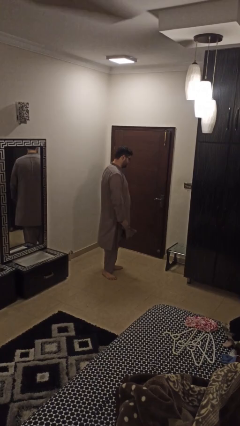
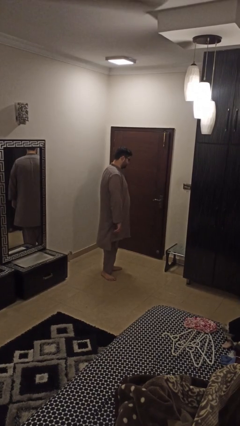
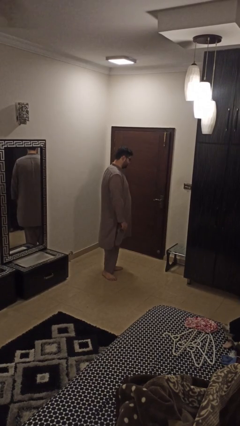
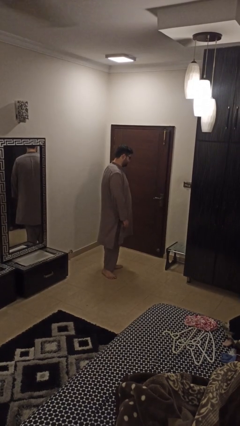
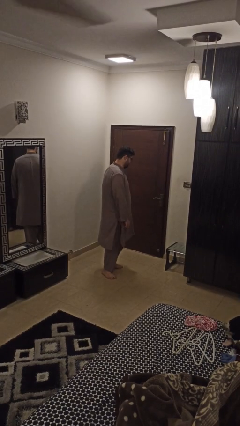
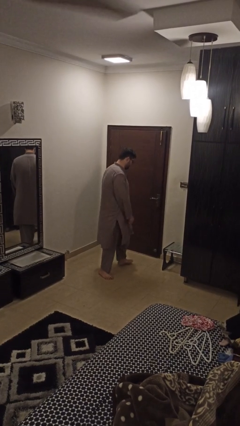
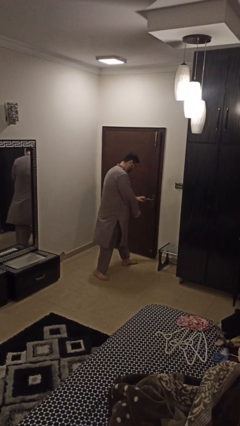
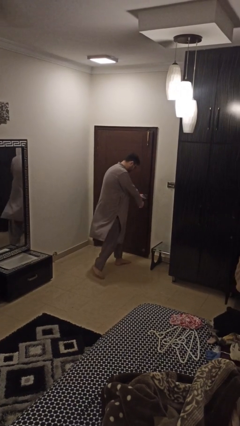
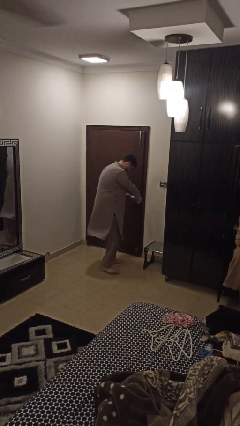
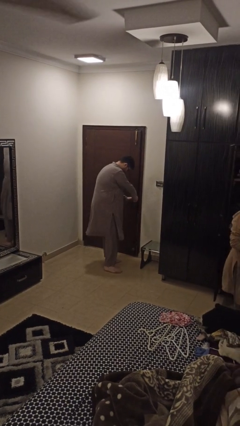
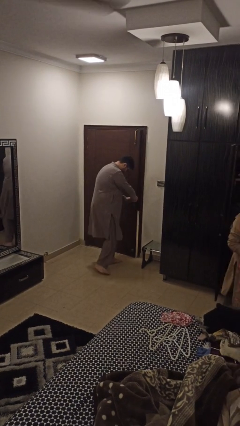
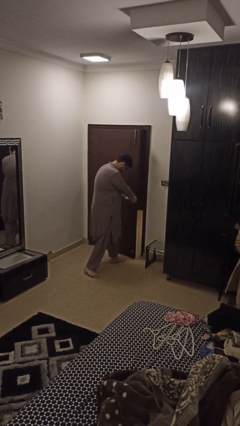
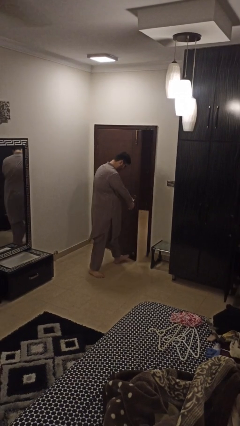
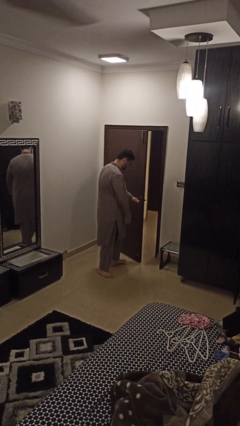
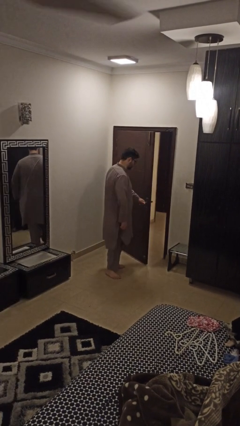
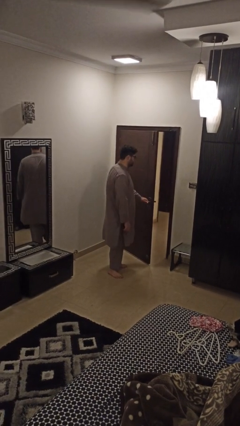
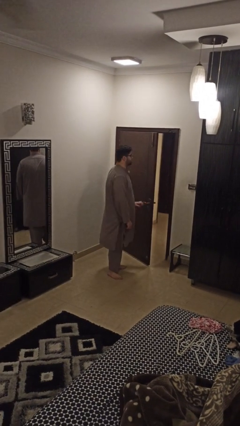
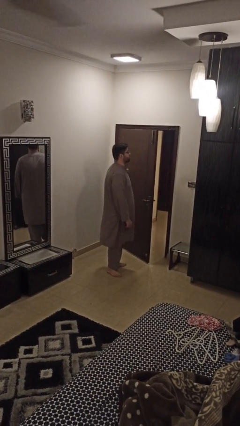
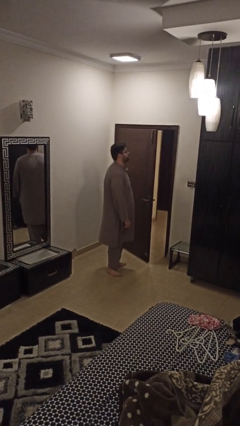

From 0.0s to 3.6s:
person opens facility door

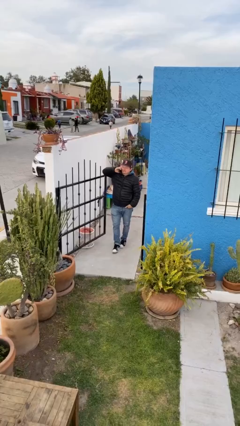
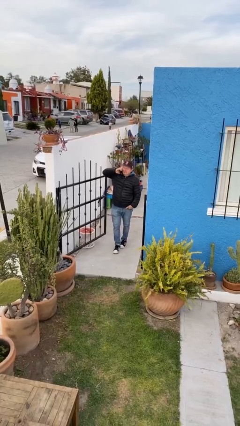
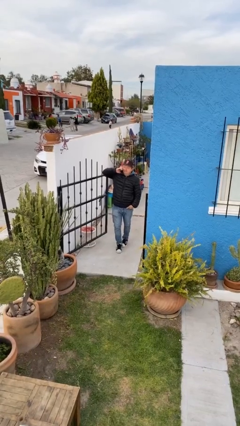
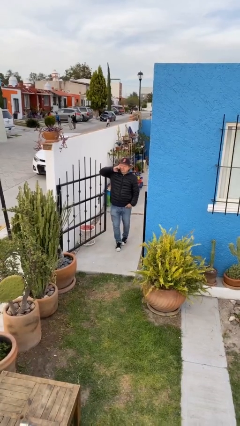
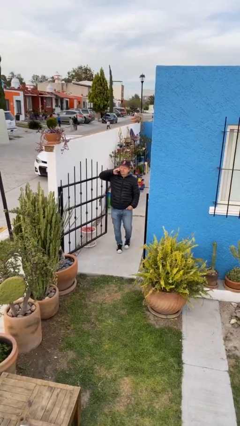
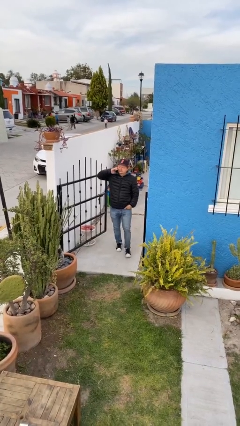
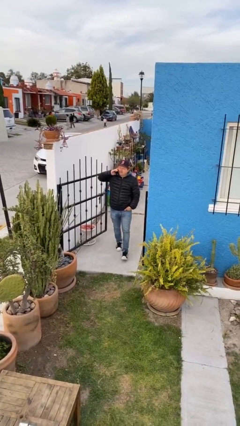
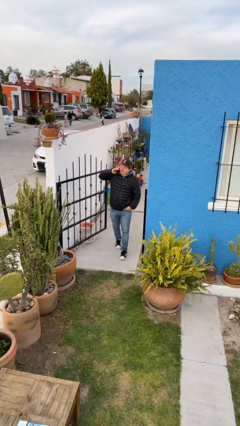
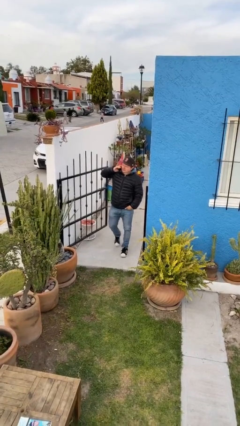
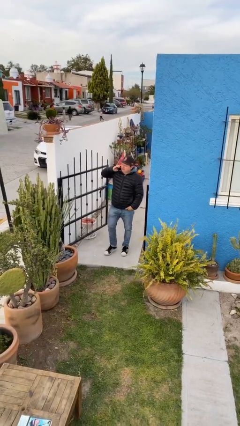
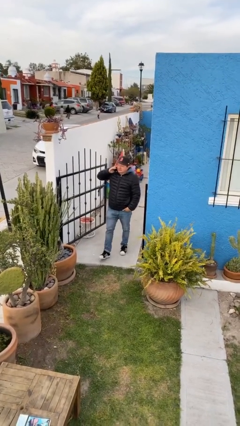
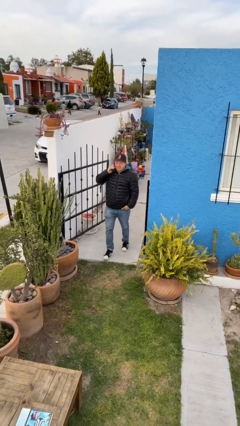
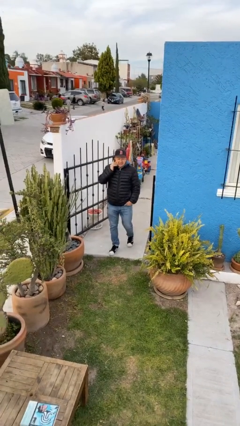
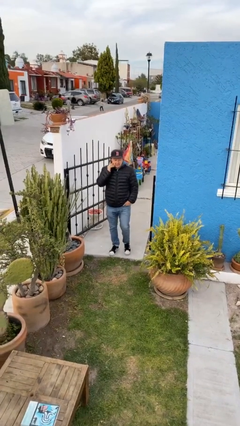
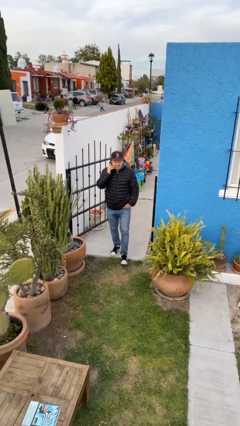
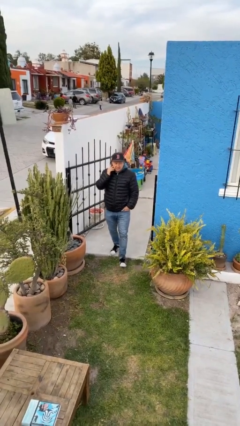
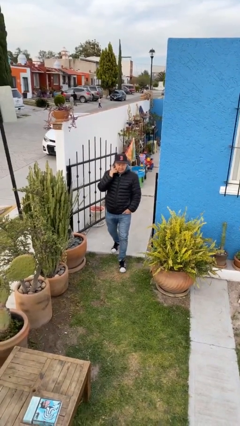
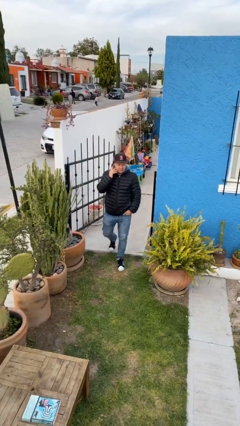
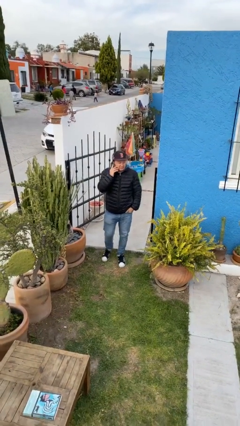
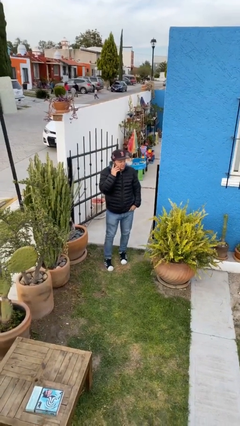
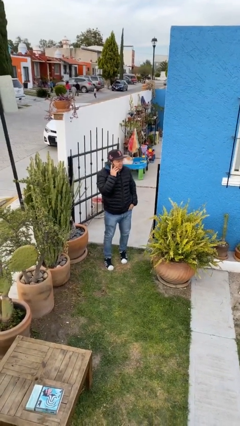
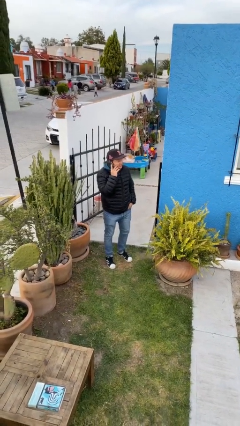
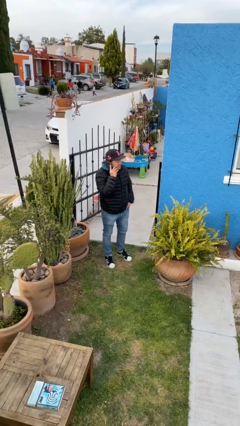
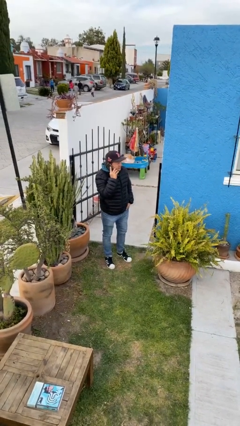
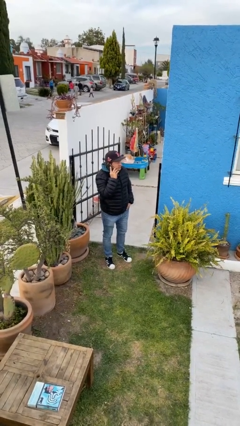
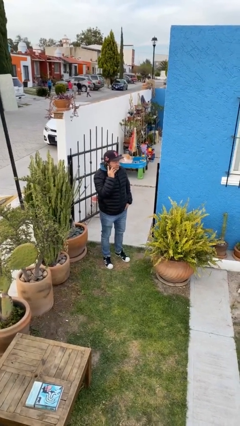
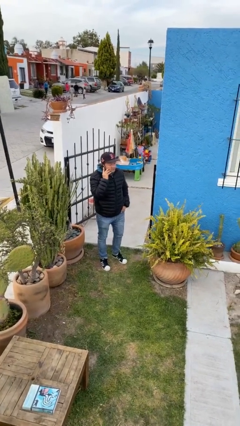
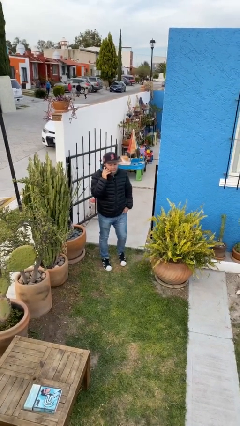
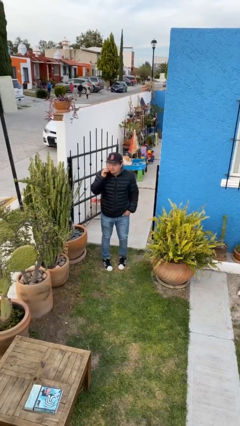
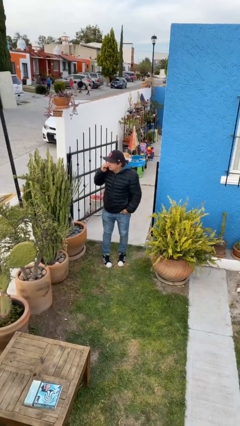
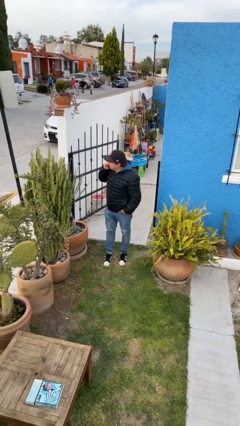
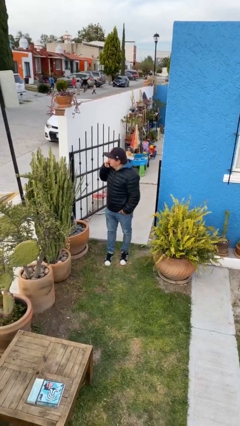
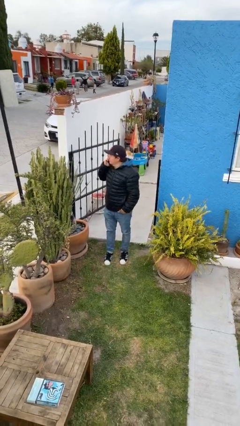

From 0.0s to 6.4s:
person enters scene through structure

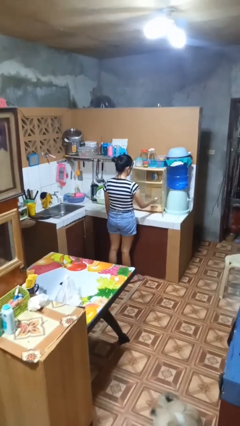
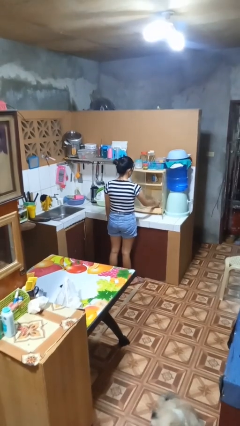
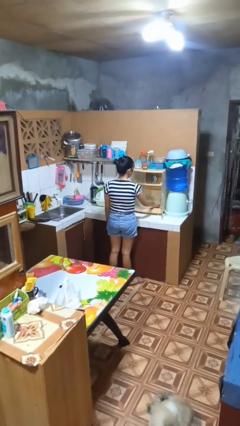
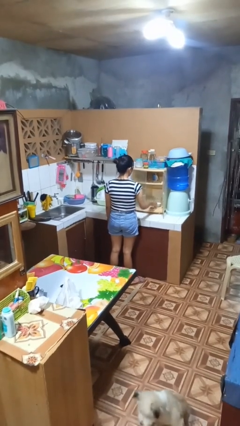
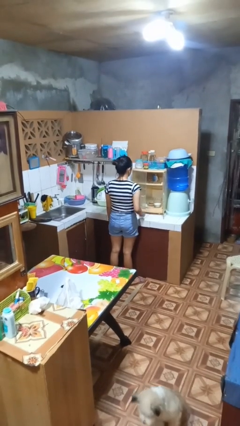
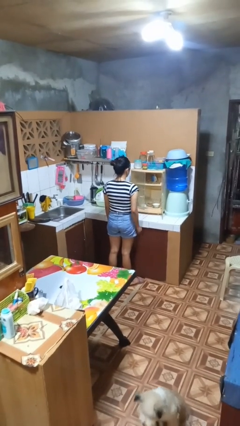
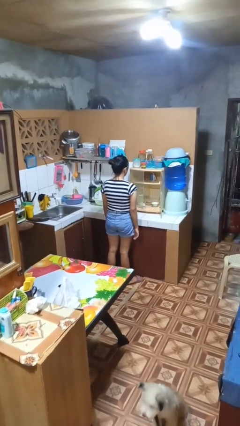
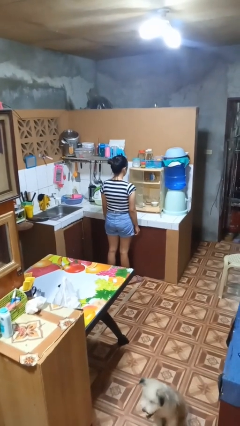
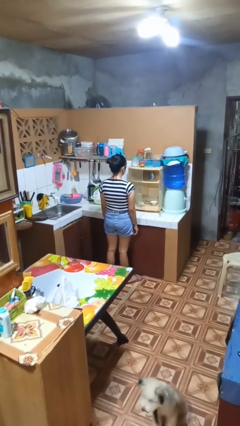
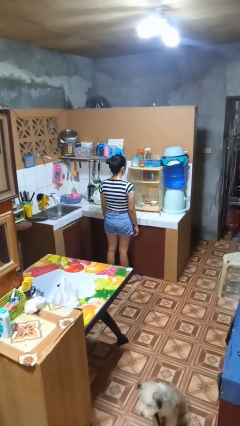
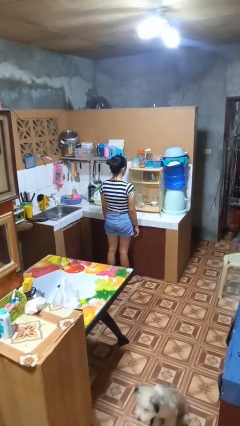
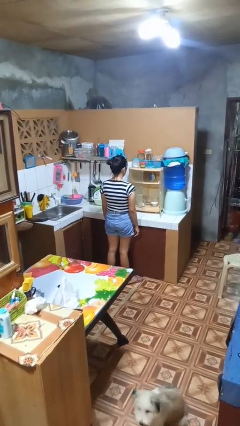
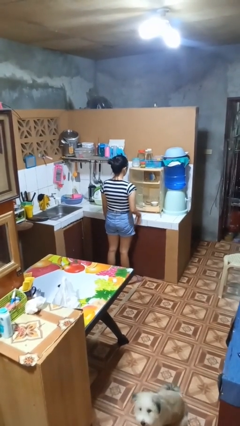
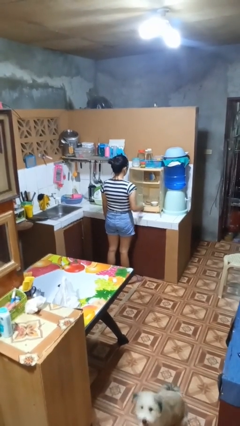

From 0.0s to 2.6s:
person puts object in cabinet

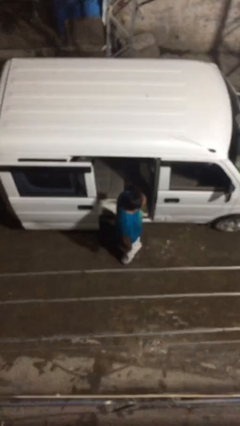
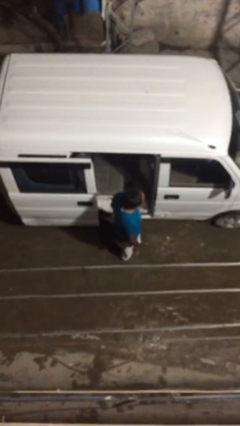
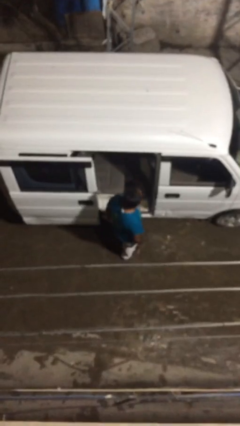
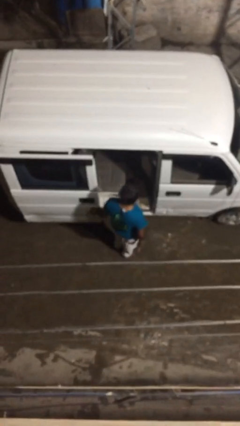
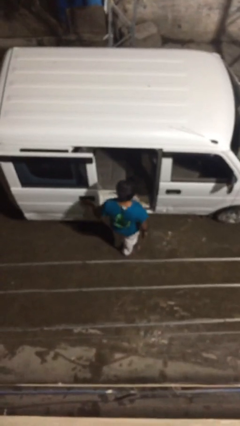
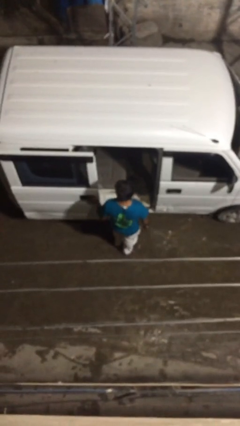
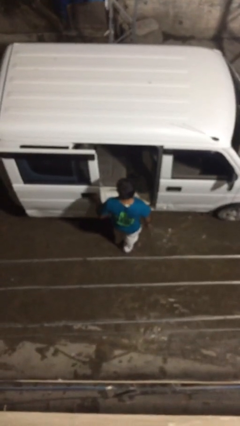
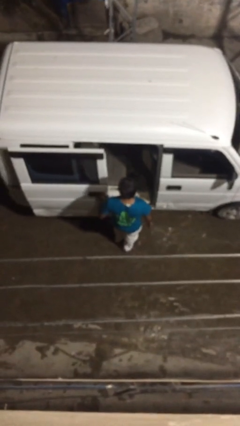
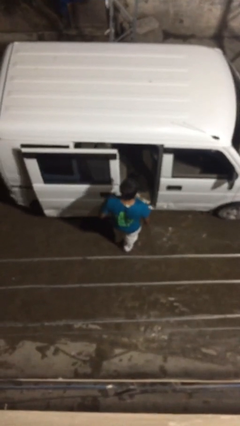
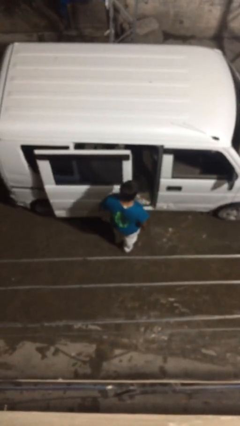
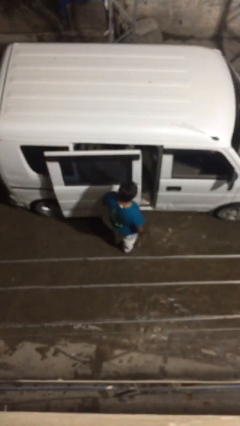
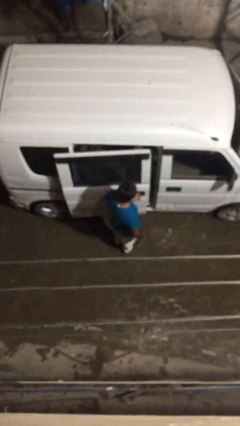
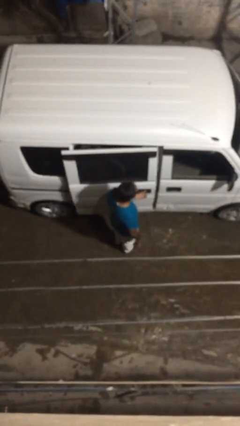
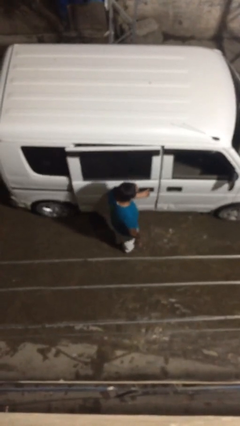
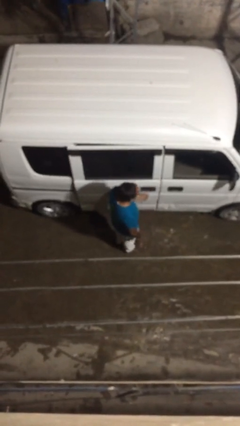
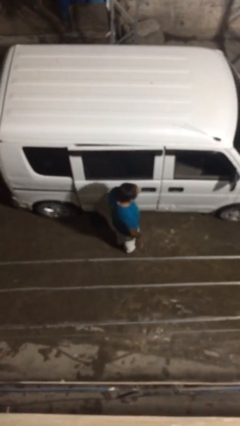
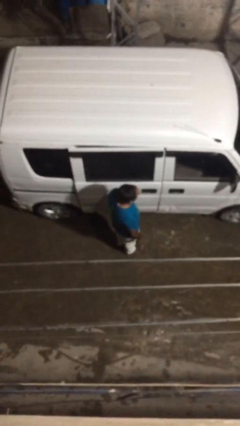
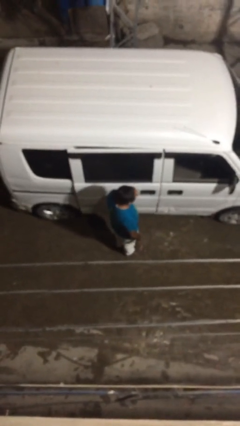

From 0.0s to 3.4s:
person closes car door

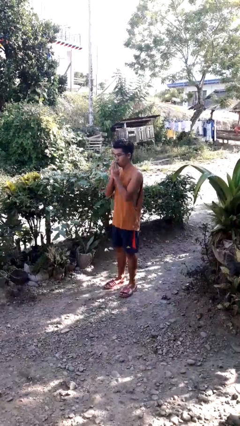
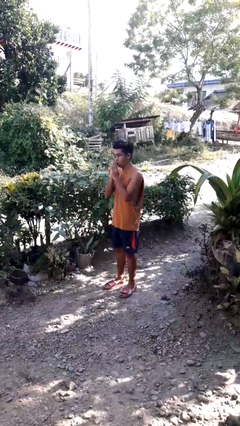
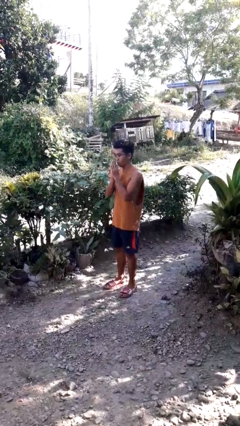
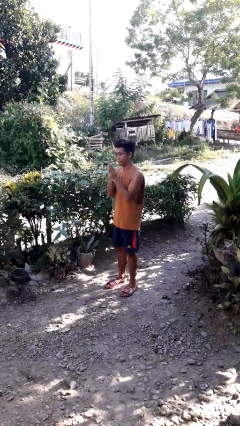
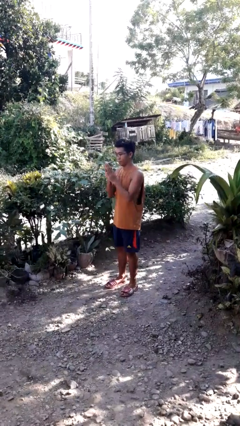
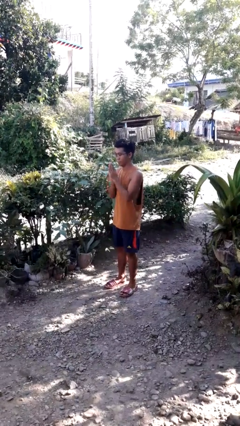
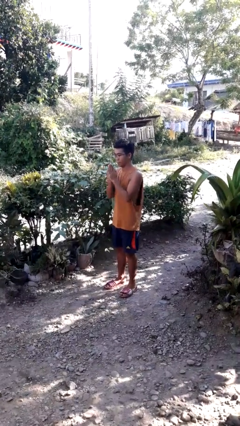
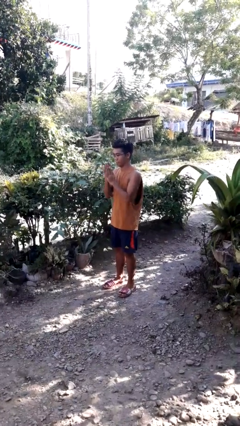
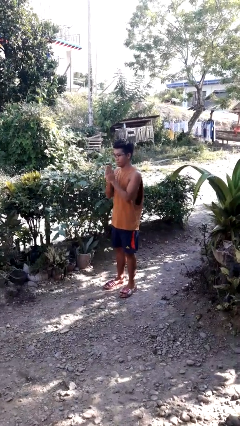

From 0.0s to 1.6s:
person blows into hands
